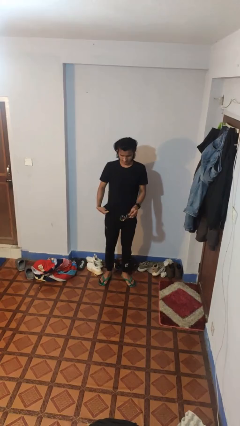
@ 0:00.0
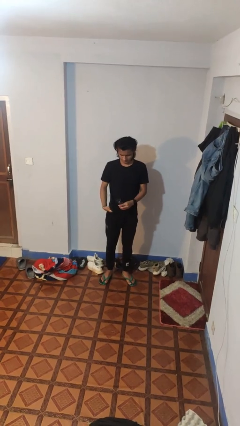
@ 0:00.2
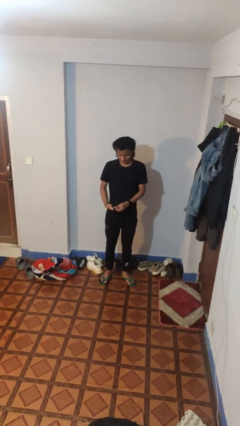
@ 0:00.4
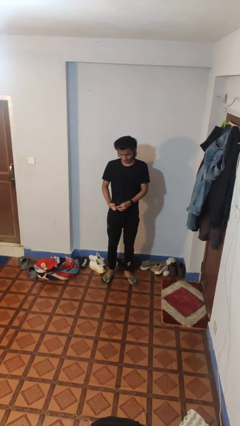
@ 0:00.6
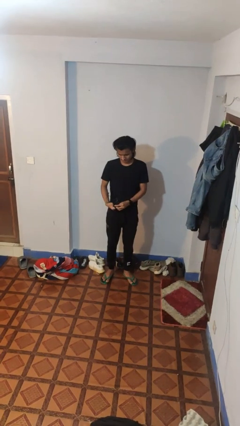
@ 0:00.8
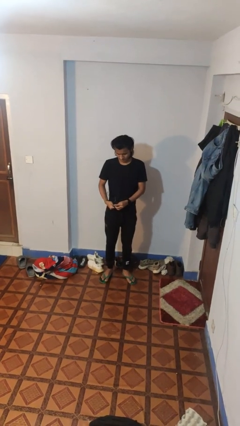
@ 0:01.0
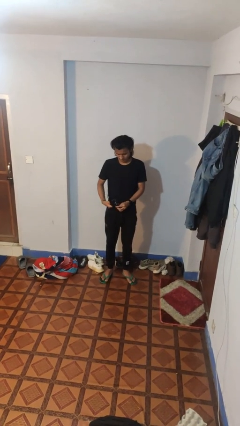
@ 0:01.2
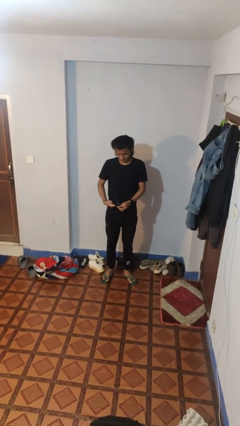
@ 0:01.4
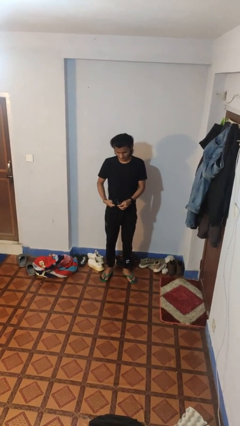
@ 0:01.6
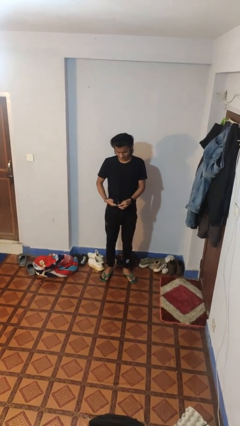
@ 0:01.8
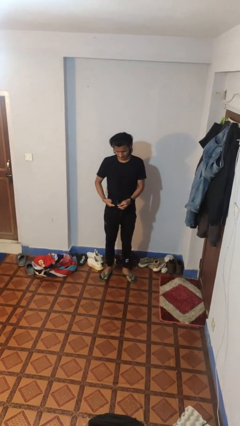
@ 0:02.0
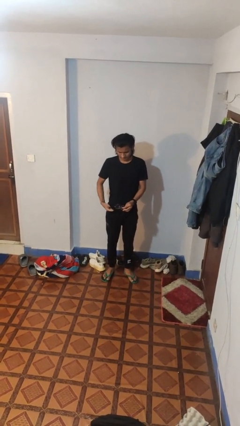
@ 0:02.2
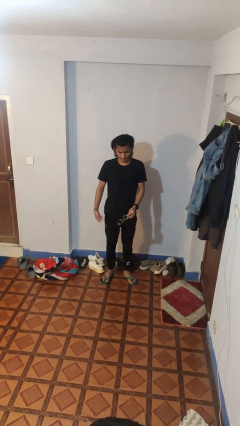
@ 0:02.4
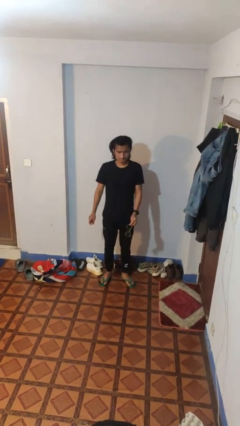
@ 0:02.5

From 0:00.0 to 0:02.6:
person cleans eyeglasses

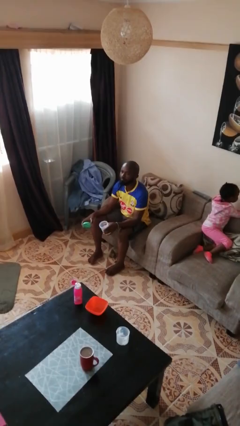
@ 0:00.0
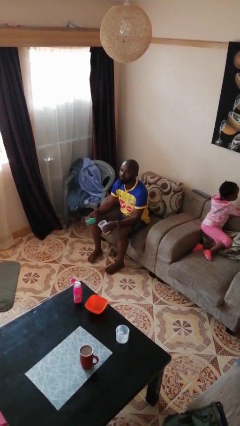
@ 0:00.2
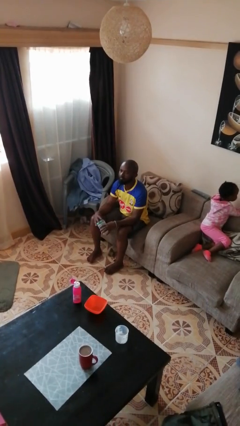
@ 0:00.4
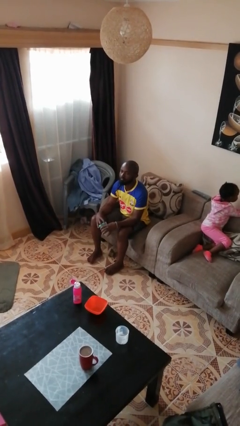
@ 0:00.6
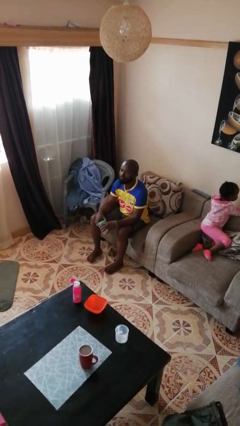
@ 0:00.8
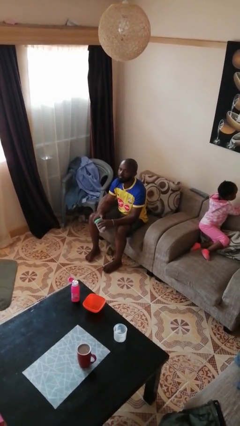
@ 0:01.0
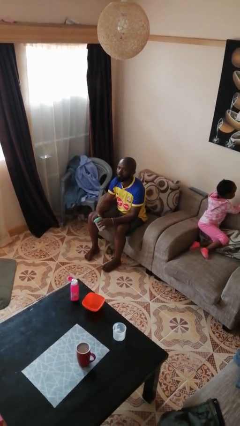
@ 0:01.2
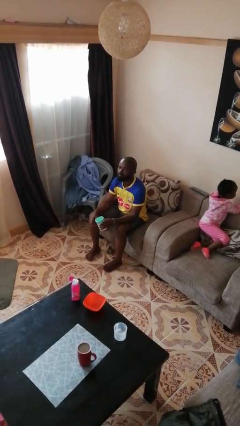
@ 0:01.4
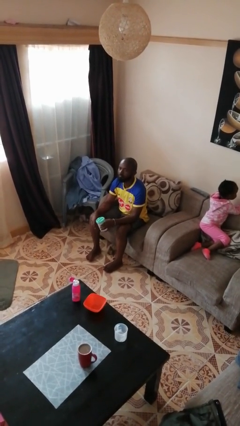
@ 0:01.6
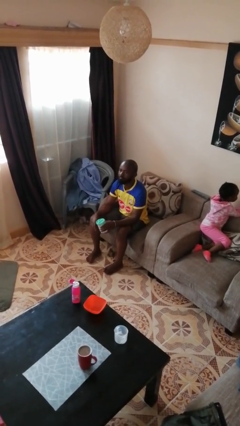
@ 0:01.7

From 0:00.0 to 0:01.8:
person closes jar

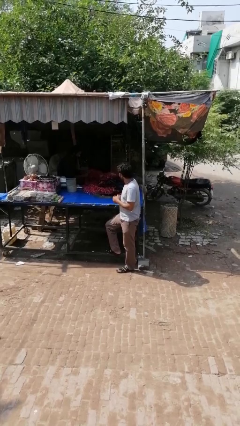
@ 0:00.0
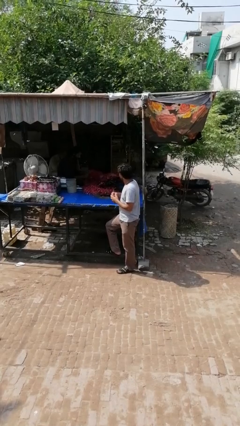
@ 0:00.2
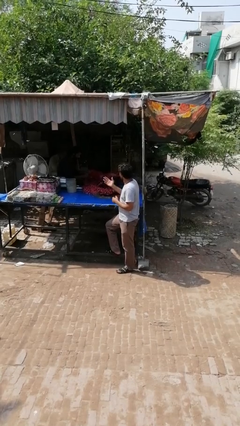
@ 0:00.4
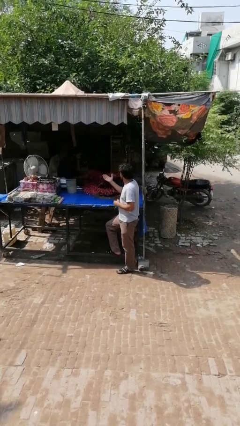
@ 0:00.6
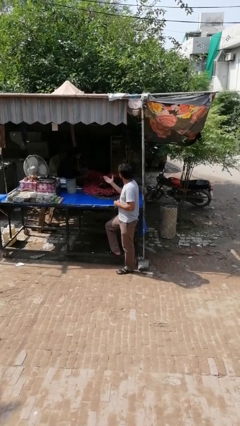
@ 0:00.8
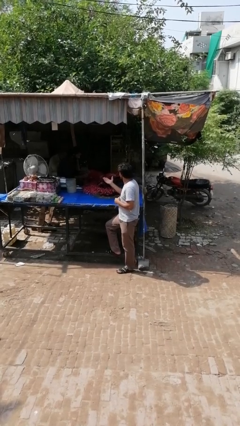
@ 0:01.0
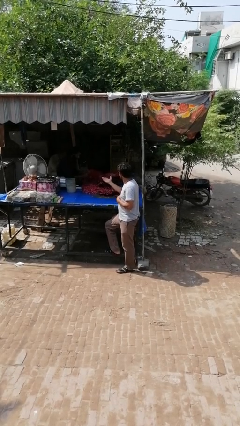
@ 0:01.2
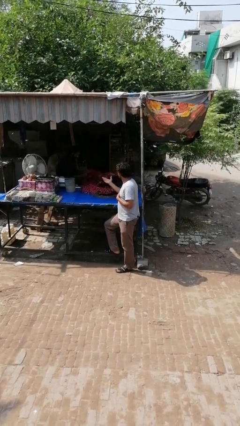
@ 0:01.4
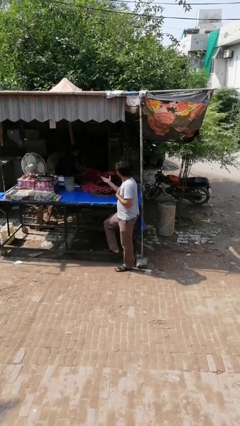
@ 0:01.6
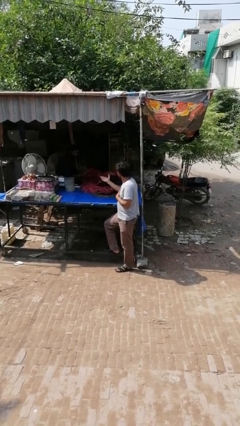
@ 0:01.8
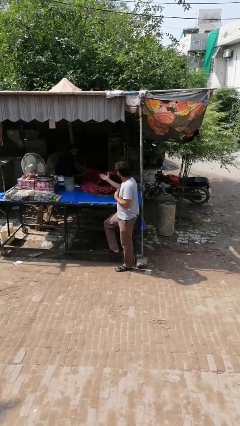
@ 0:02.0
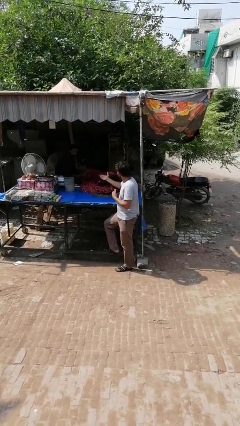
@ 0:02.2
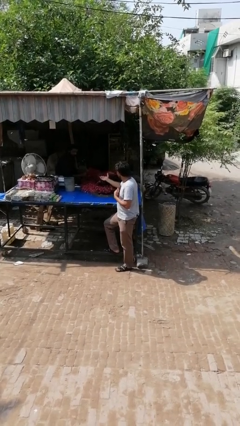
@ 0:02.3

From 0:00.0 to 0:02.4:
person talks to person

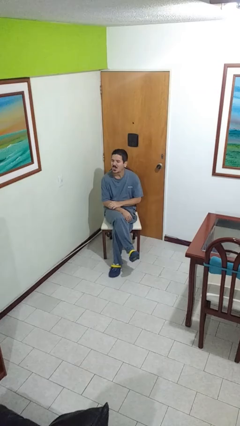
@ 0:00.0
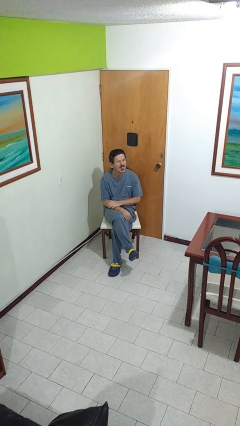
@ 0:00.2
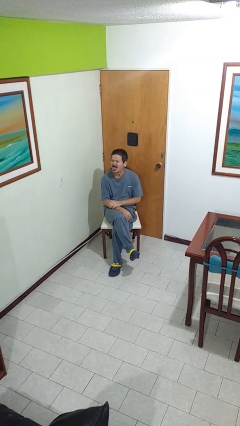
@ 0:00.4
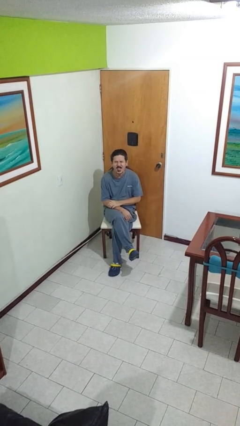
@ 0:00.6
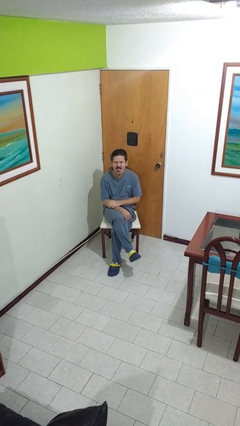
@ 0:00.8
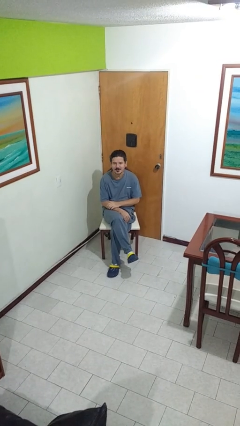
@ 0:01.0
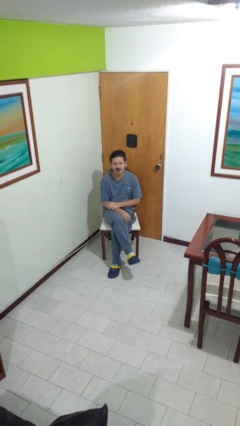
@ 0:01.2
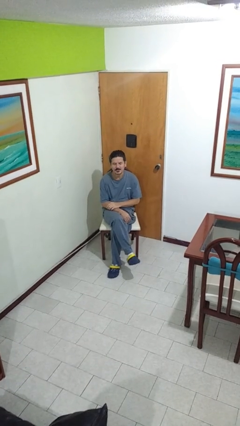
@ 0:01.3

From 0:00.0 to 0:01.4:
person sticks out tongue

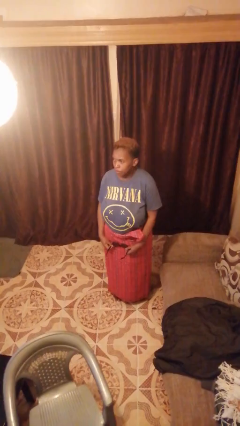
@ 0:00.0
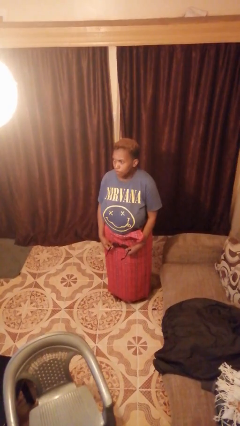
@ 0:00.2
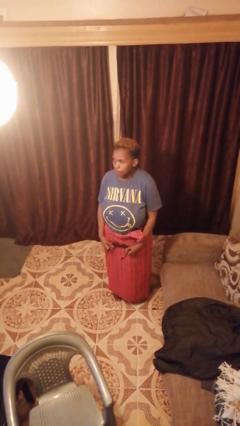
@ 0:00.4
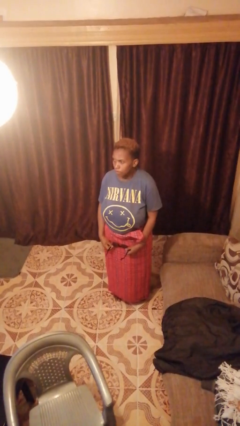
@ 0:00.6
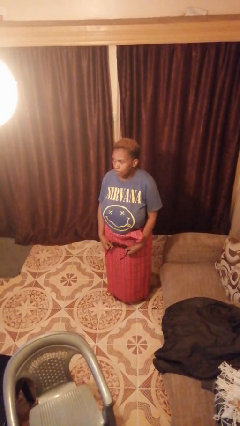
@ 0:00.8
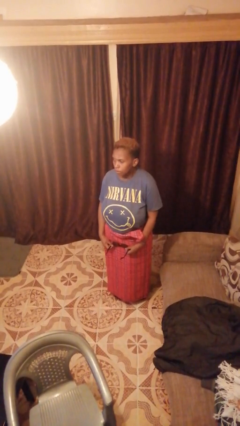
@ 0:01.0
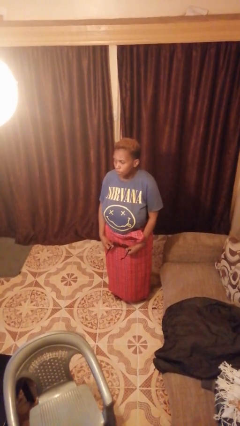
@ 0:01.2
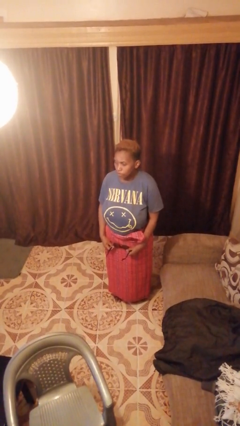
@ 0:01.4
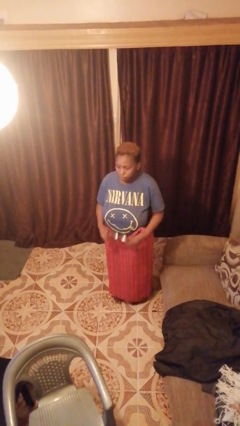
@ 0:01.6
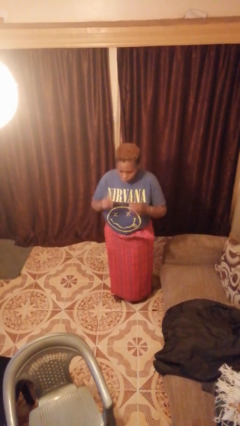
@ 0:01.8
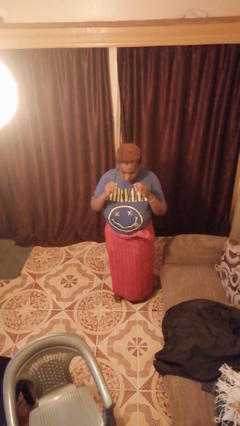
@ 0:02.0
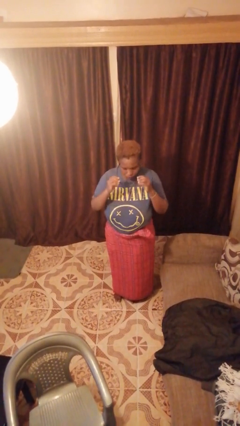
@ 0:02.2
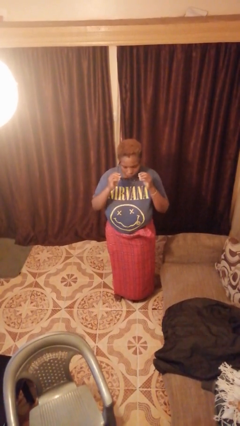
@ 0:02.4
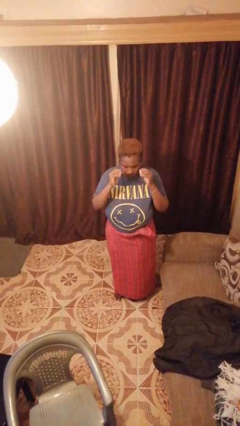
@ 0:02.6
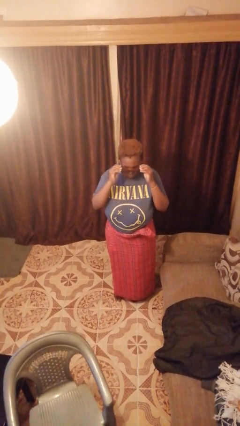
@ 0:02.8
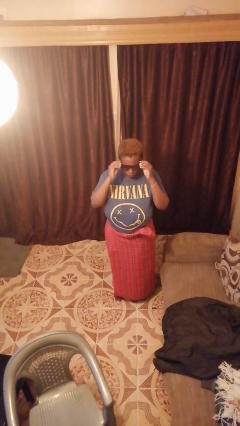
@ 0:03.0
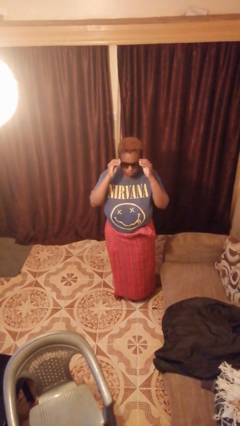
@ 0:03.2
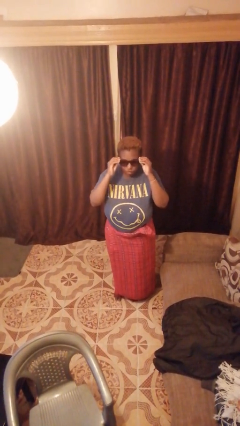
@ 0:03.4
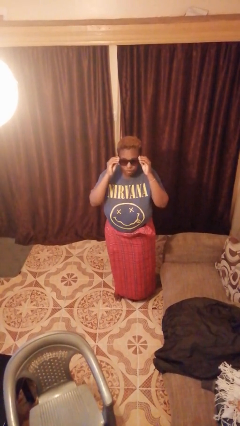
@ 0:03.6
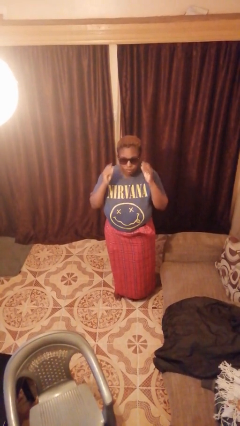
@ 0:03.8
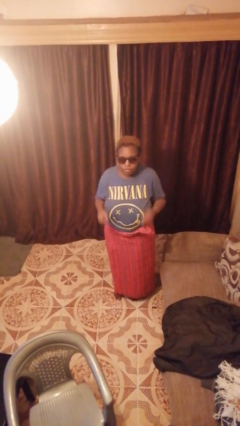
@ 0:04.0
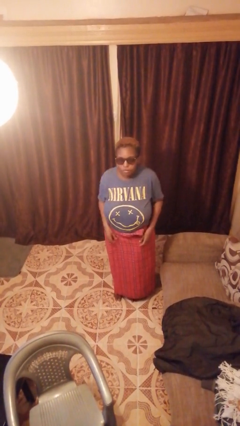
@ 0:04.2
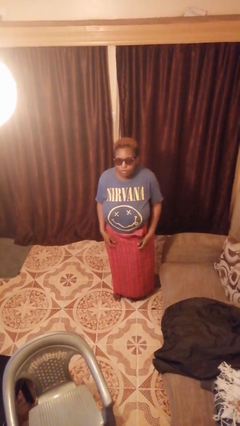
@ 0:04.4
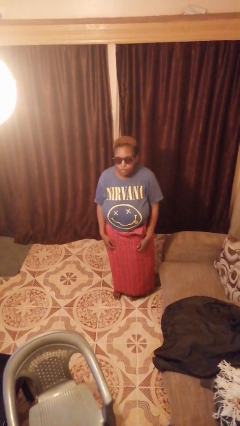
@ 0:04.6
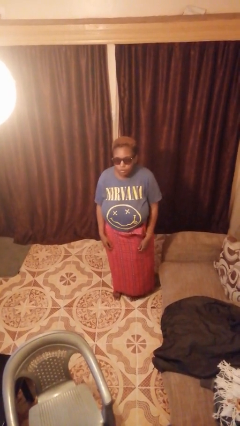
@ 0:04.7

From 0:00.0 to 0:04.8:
person puts on sunglasses

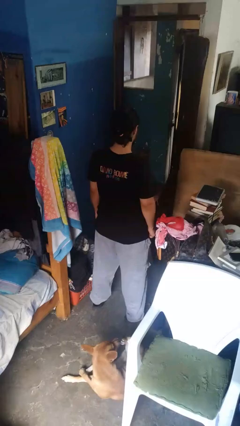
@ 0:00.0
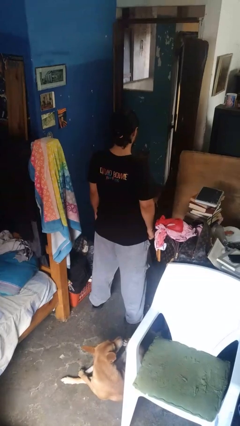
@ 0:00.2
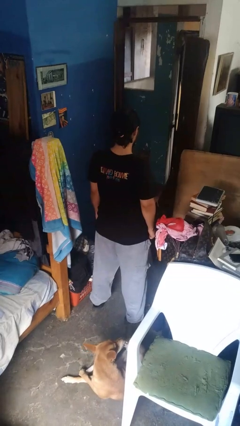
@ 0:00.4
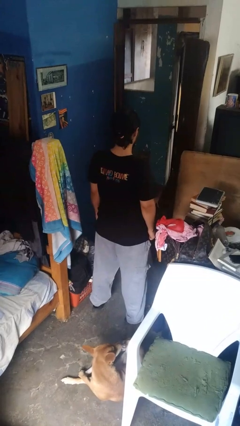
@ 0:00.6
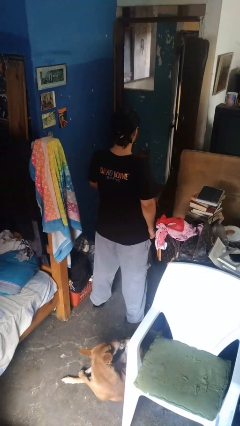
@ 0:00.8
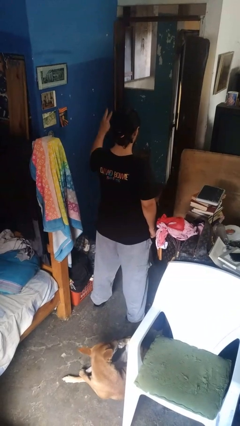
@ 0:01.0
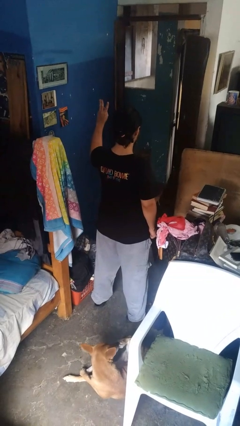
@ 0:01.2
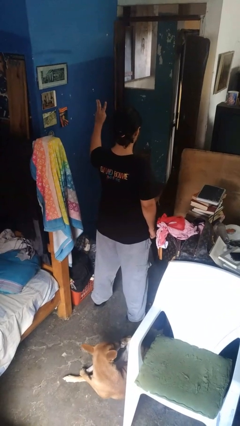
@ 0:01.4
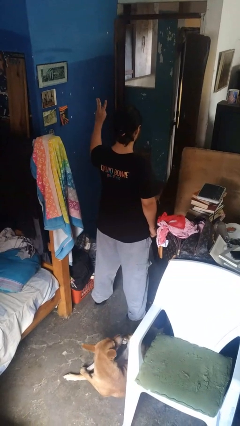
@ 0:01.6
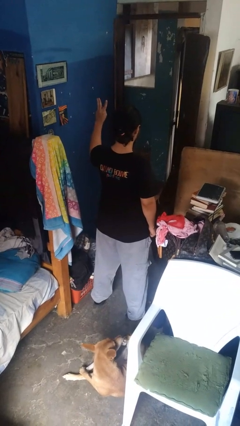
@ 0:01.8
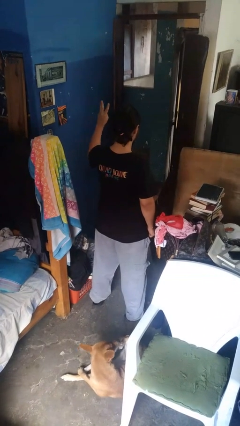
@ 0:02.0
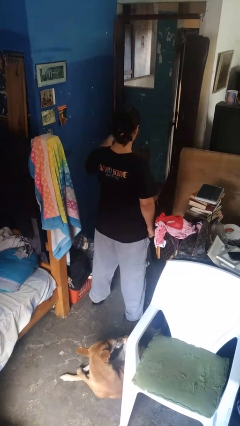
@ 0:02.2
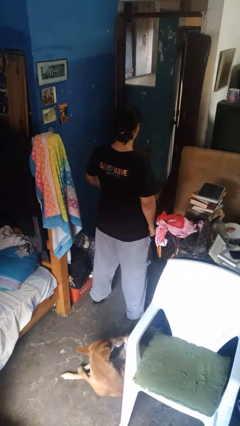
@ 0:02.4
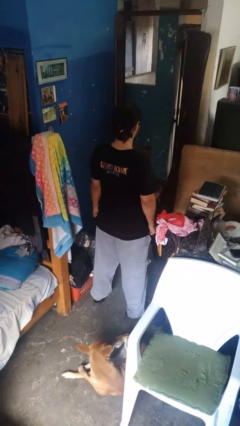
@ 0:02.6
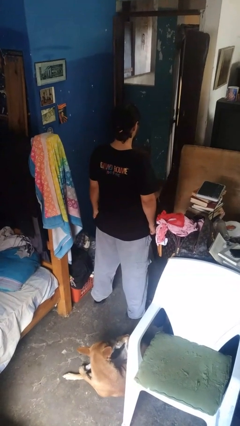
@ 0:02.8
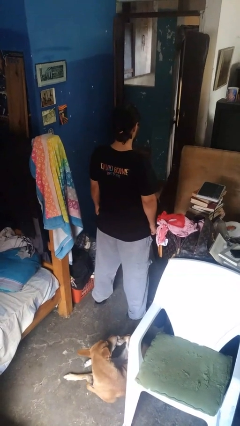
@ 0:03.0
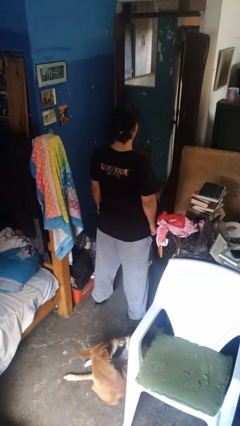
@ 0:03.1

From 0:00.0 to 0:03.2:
person gestures number three

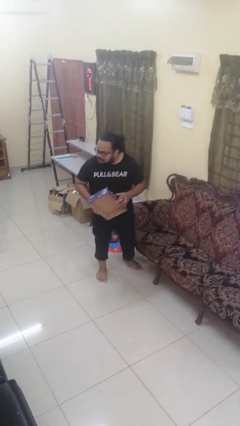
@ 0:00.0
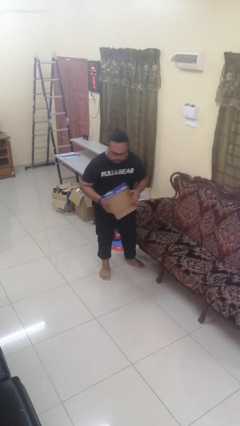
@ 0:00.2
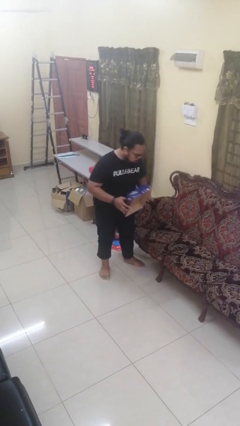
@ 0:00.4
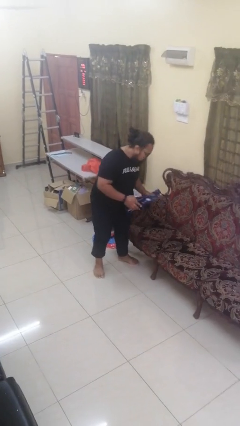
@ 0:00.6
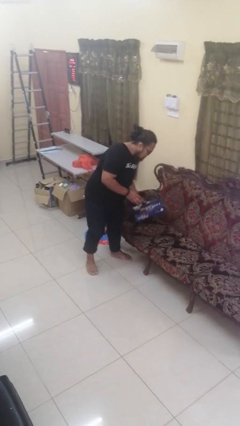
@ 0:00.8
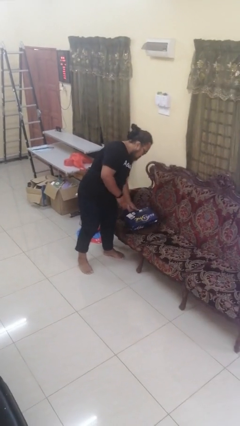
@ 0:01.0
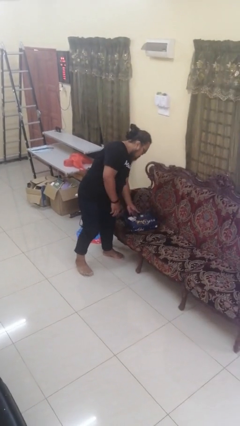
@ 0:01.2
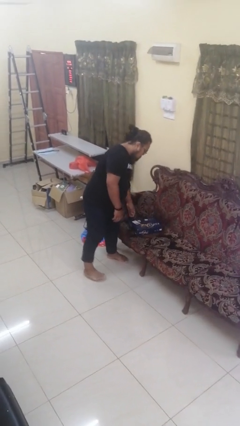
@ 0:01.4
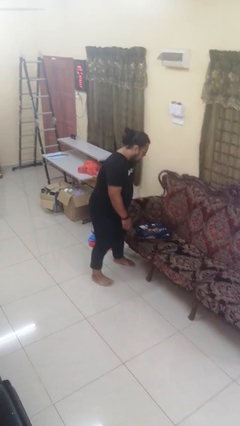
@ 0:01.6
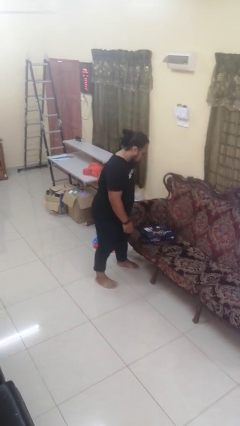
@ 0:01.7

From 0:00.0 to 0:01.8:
person puts down object on couch
